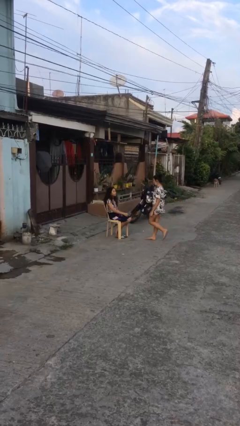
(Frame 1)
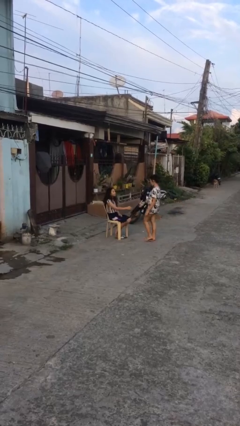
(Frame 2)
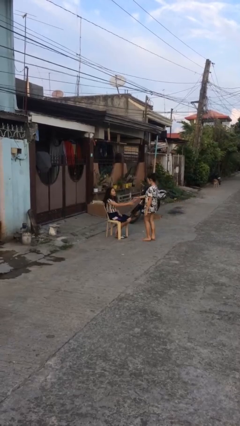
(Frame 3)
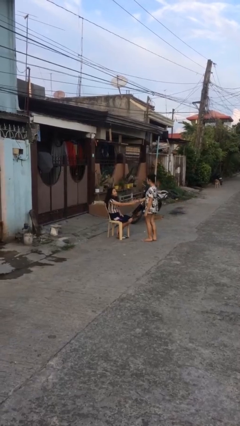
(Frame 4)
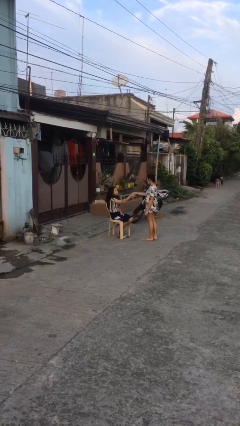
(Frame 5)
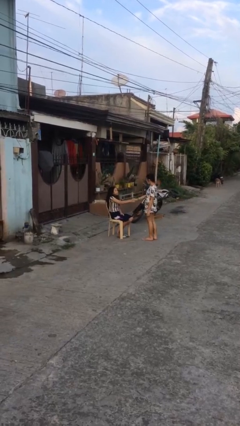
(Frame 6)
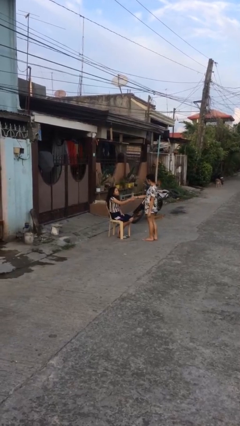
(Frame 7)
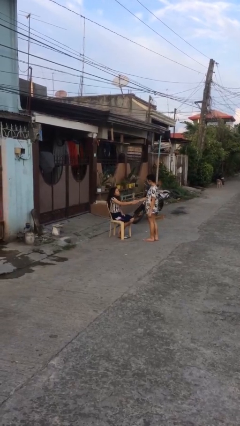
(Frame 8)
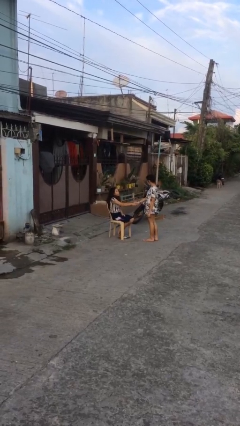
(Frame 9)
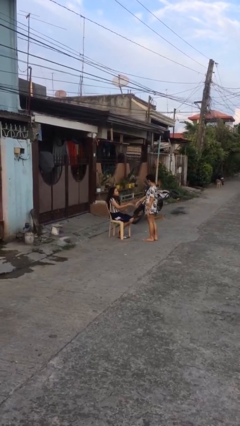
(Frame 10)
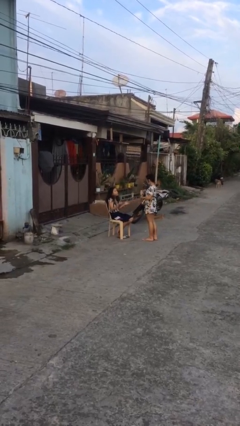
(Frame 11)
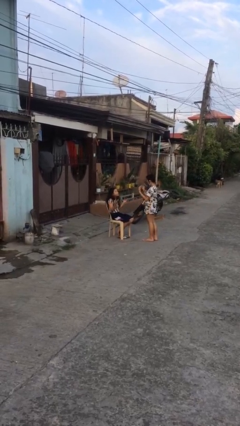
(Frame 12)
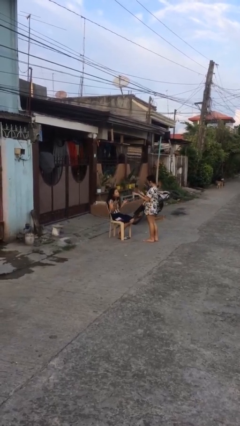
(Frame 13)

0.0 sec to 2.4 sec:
person shakes hand

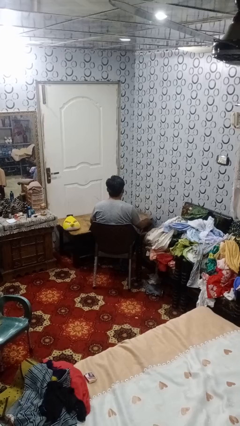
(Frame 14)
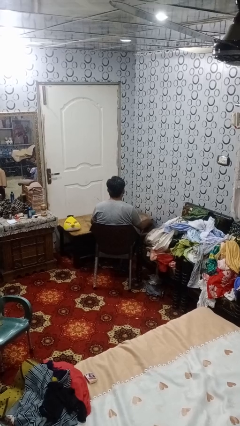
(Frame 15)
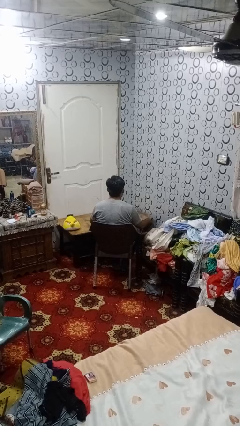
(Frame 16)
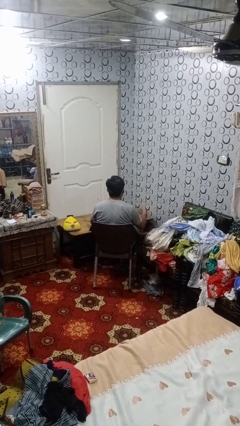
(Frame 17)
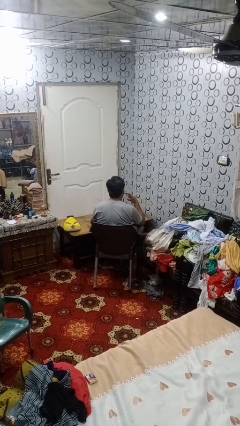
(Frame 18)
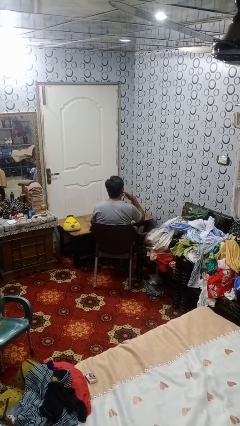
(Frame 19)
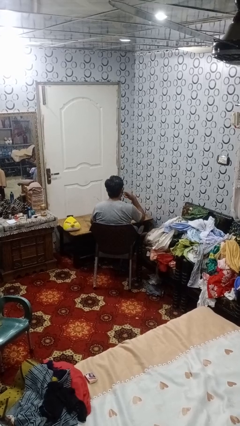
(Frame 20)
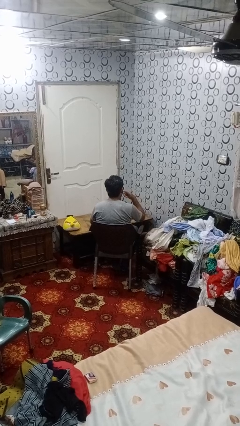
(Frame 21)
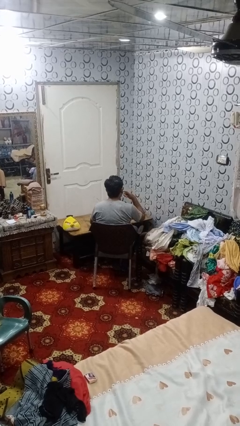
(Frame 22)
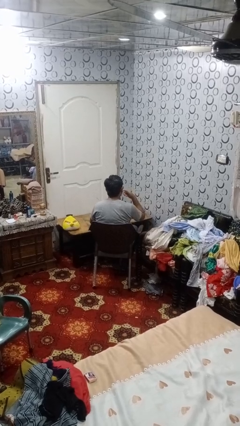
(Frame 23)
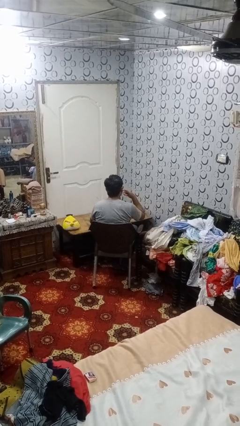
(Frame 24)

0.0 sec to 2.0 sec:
person licks fingers

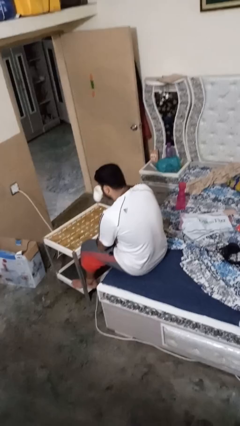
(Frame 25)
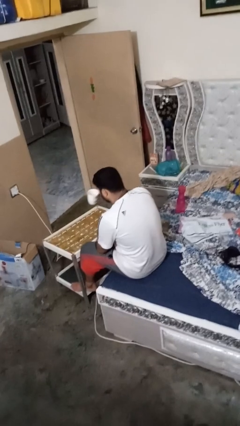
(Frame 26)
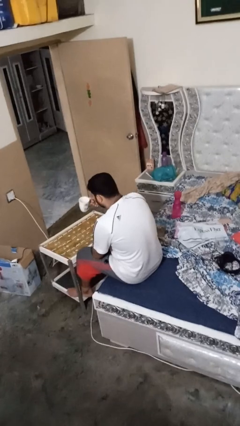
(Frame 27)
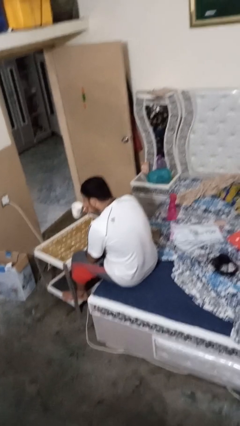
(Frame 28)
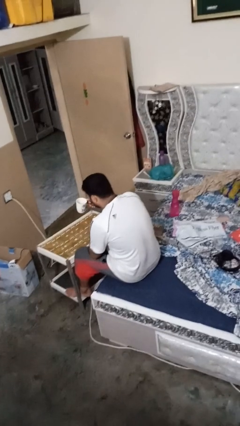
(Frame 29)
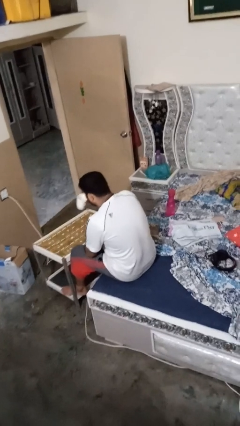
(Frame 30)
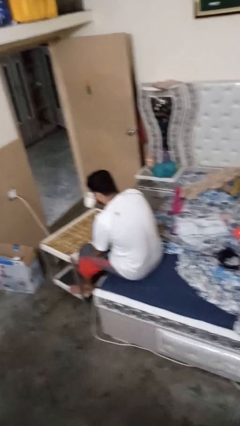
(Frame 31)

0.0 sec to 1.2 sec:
person drinks from mug

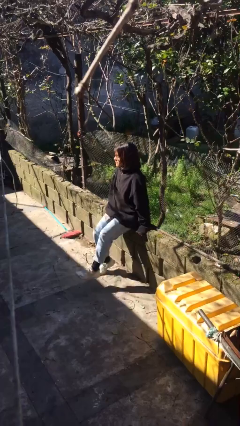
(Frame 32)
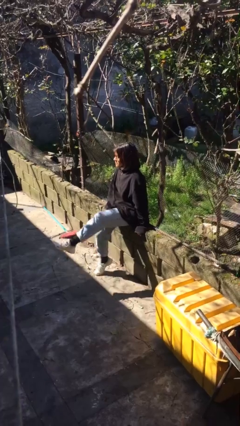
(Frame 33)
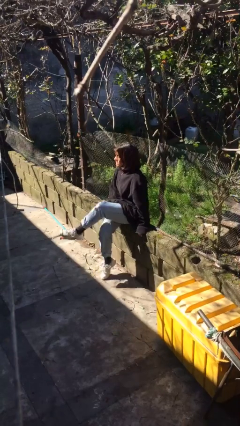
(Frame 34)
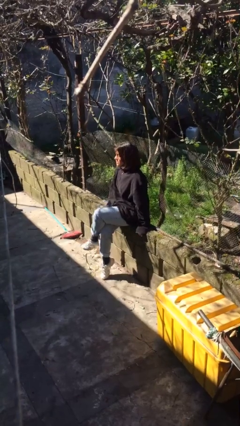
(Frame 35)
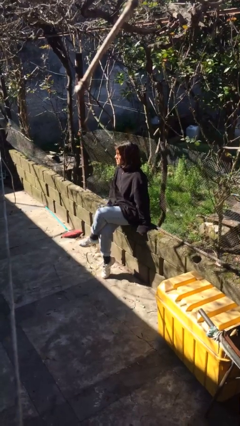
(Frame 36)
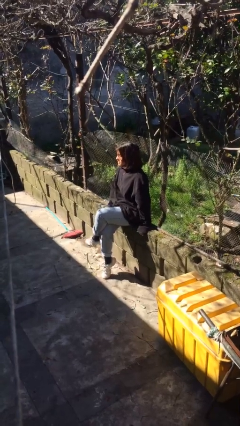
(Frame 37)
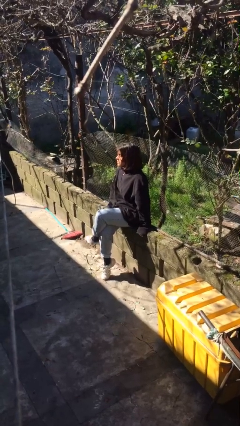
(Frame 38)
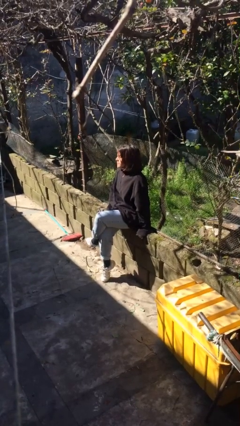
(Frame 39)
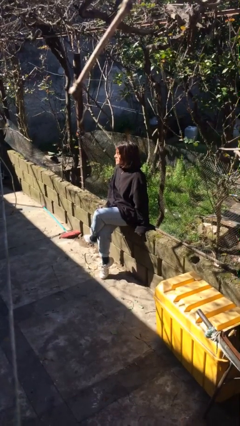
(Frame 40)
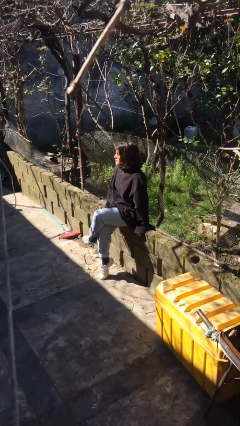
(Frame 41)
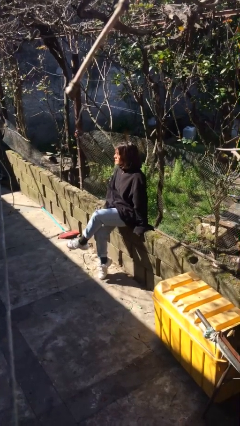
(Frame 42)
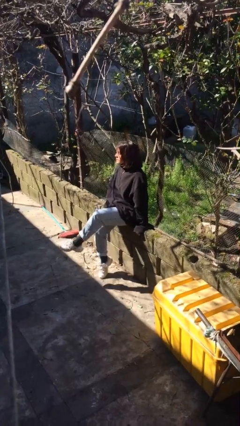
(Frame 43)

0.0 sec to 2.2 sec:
person crosses legs

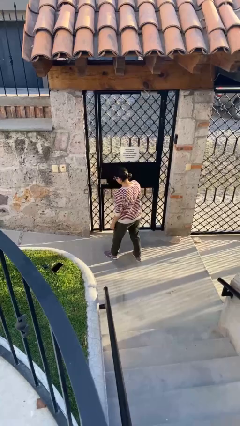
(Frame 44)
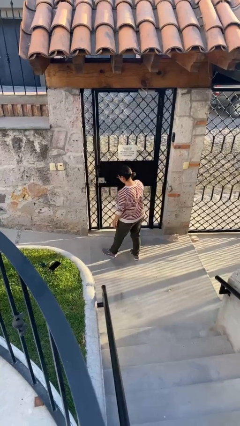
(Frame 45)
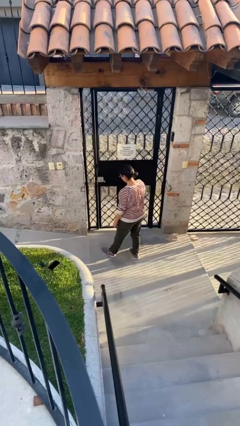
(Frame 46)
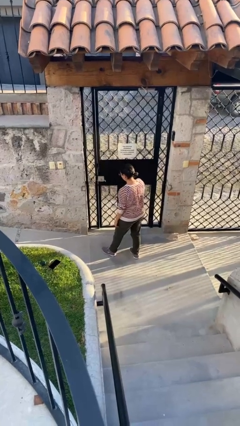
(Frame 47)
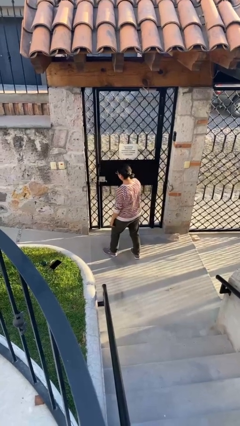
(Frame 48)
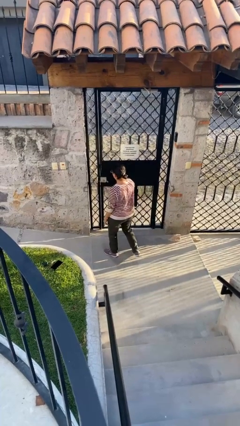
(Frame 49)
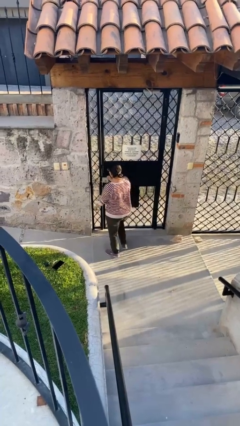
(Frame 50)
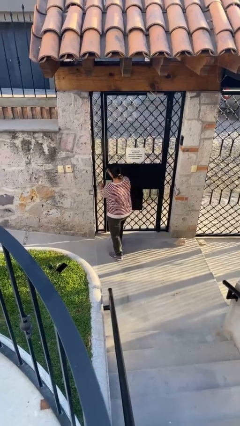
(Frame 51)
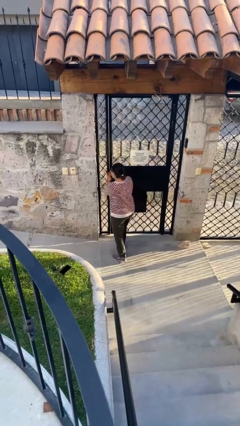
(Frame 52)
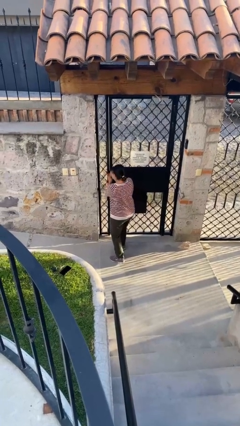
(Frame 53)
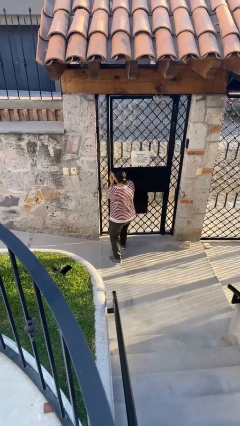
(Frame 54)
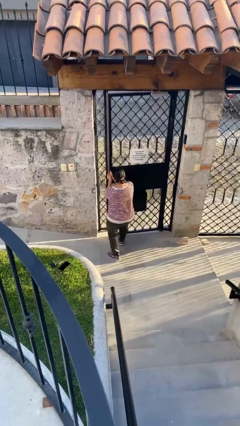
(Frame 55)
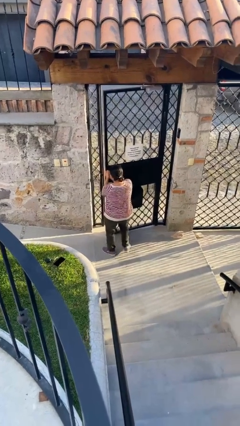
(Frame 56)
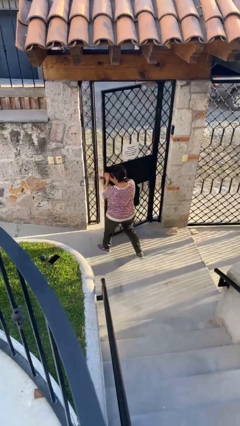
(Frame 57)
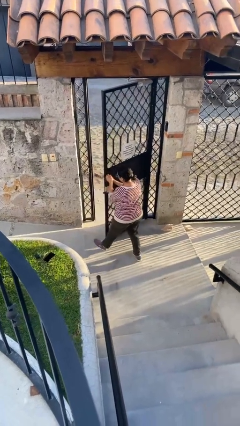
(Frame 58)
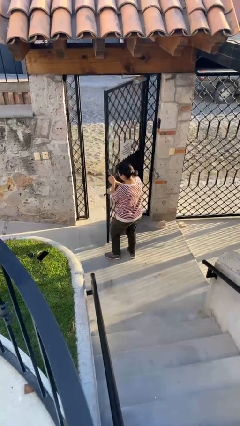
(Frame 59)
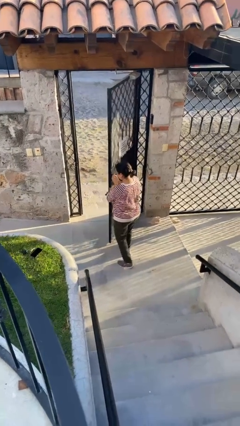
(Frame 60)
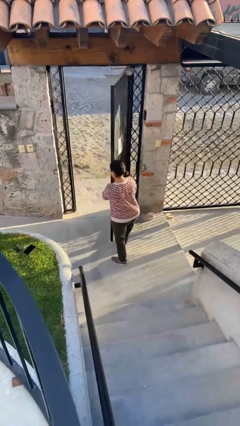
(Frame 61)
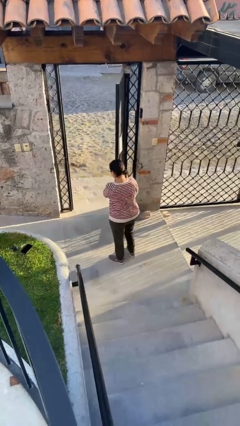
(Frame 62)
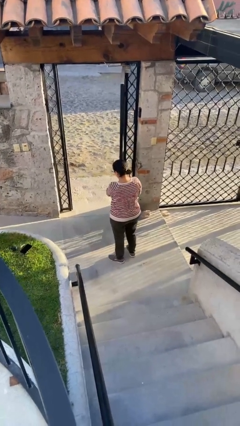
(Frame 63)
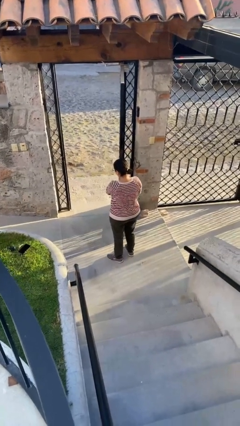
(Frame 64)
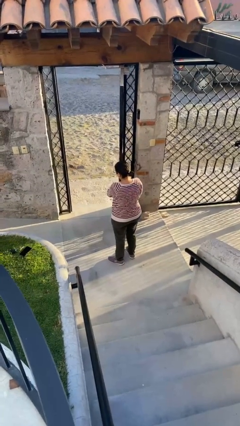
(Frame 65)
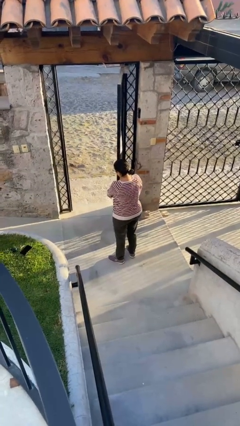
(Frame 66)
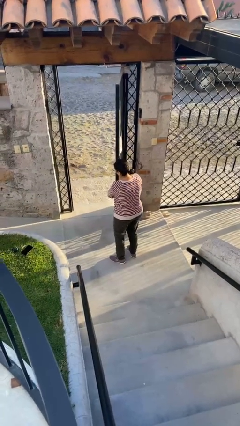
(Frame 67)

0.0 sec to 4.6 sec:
person opens facility door

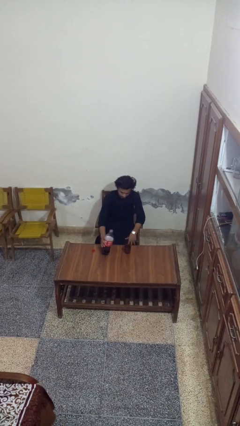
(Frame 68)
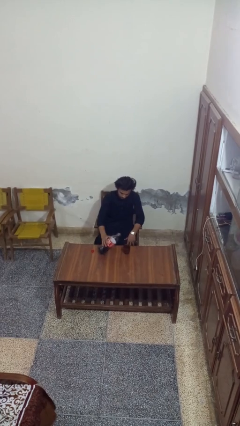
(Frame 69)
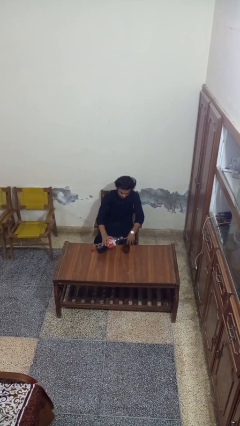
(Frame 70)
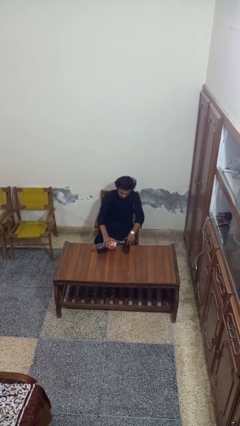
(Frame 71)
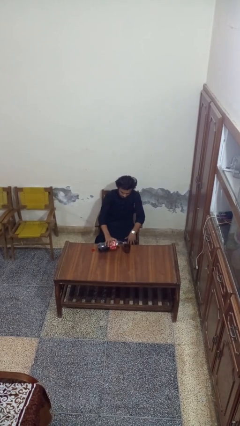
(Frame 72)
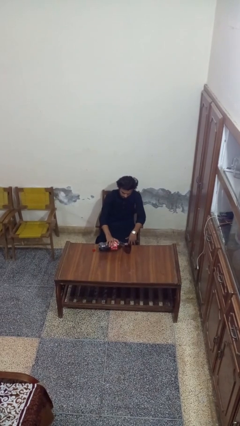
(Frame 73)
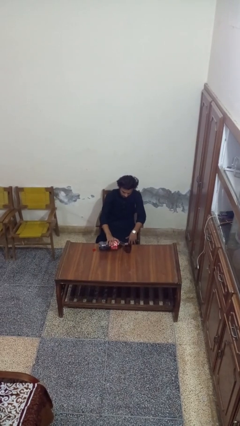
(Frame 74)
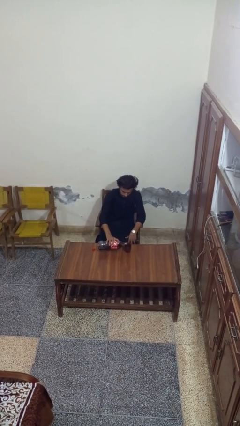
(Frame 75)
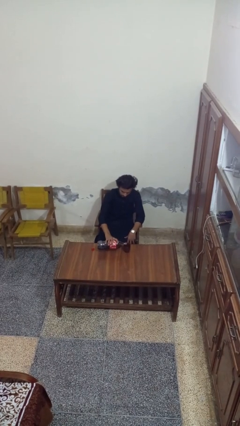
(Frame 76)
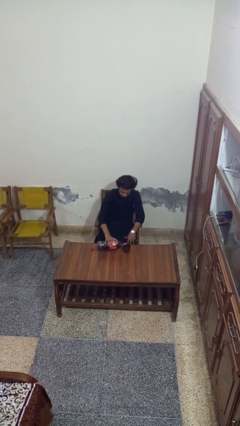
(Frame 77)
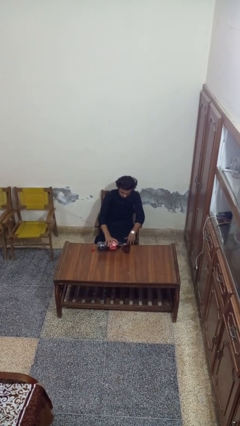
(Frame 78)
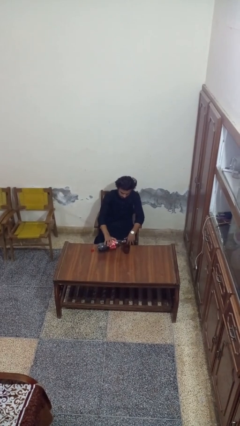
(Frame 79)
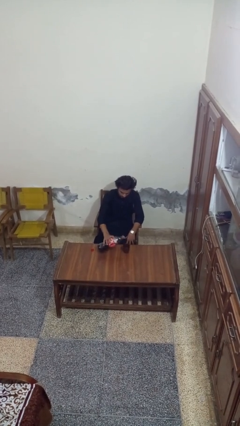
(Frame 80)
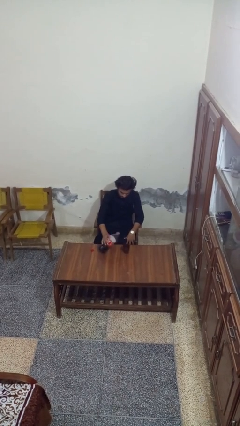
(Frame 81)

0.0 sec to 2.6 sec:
person pours liquid into cup

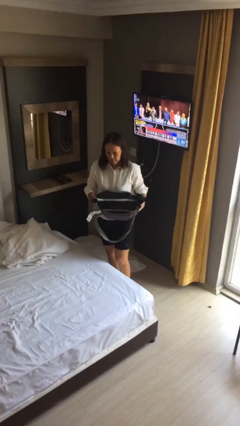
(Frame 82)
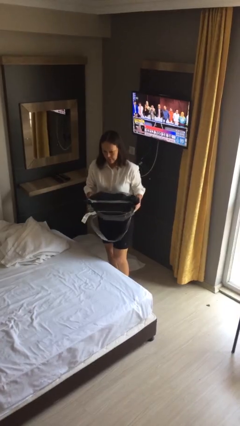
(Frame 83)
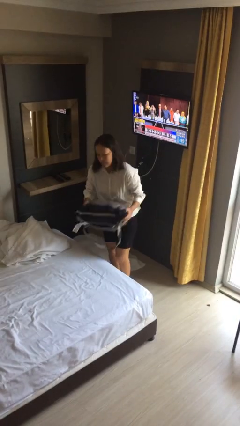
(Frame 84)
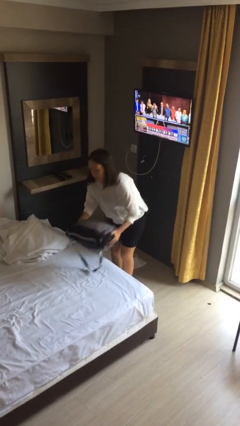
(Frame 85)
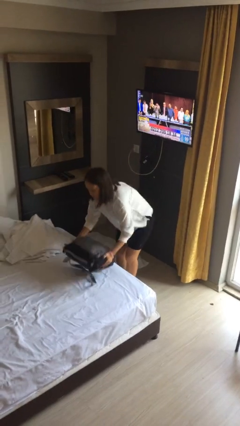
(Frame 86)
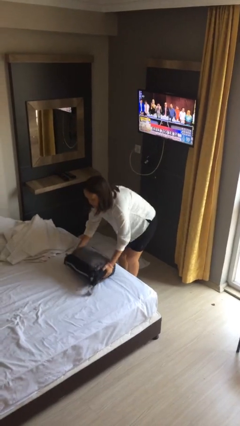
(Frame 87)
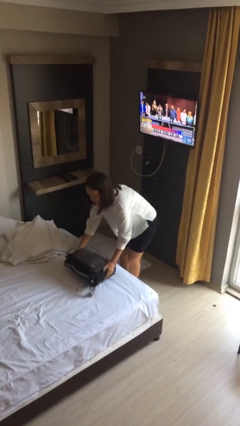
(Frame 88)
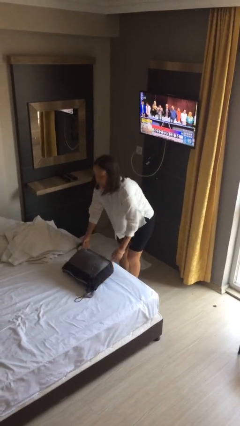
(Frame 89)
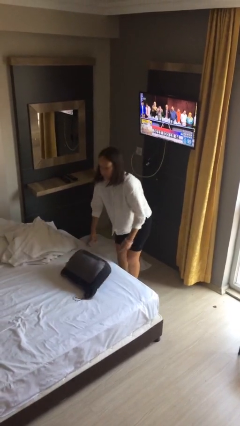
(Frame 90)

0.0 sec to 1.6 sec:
person puts down object on bed

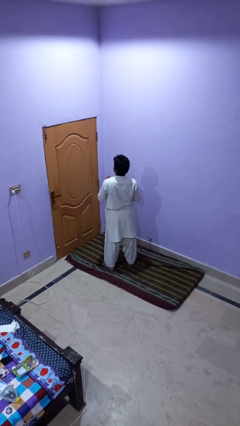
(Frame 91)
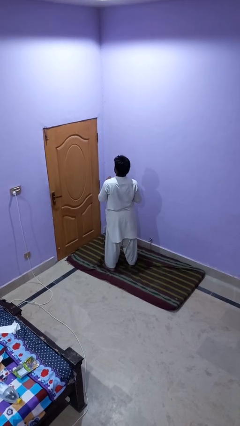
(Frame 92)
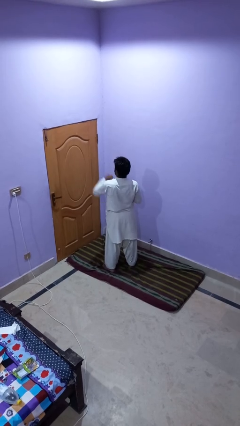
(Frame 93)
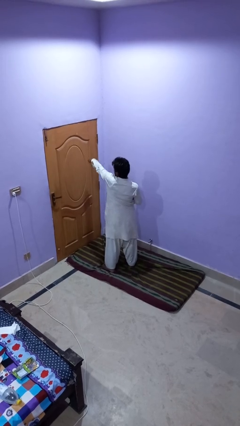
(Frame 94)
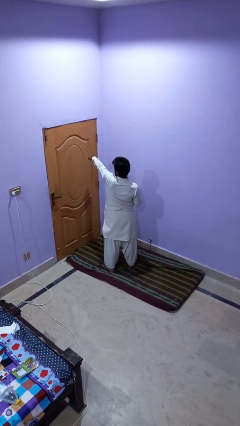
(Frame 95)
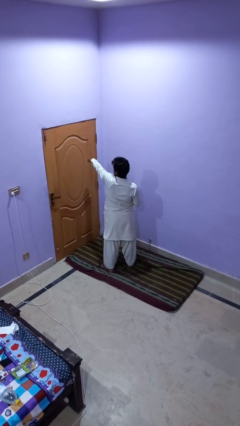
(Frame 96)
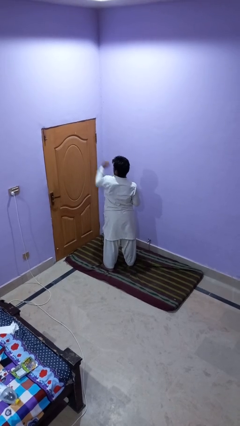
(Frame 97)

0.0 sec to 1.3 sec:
person punches
